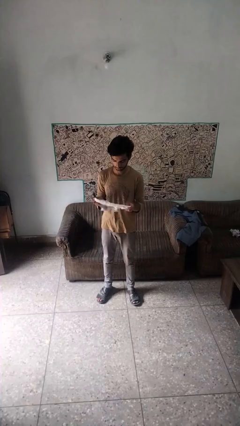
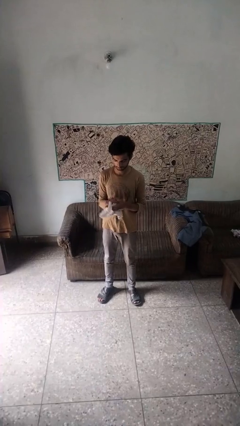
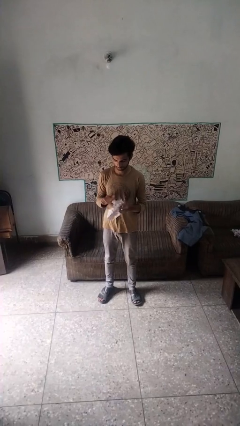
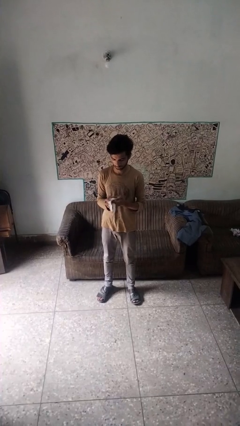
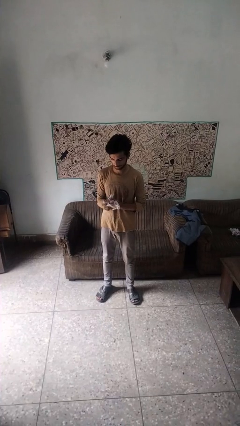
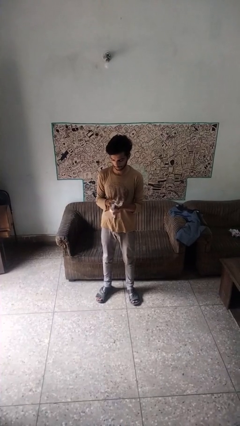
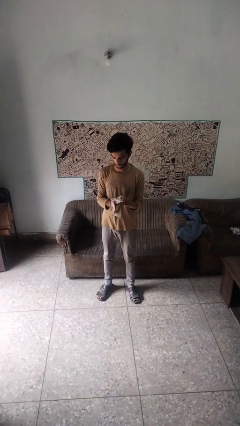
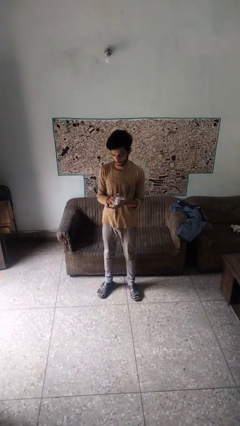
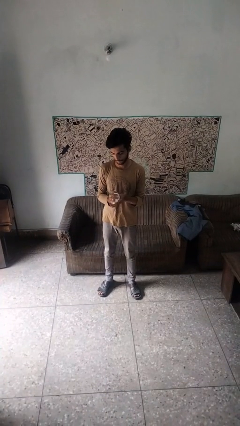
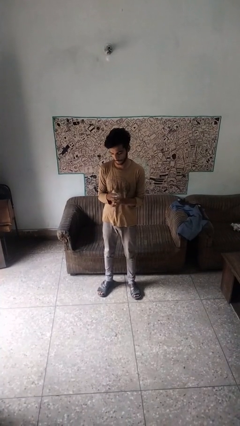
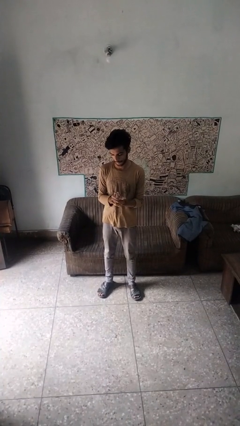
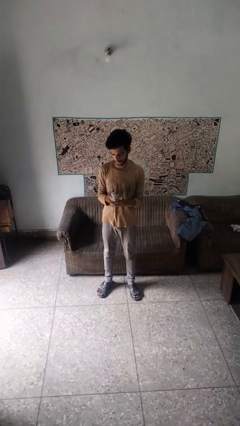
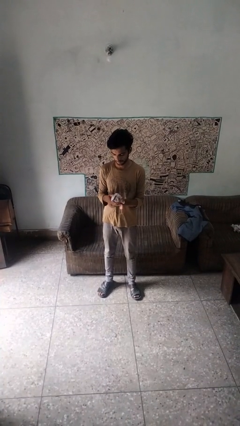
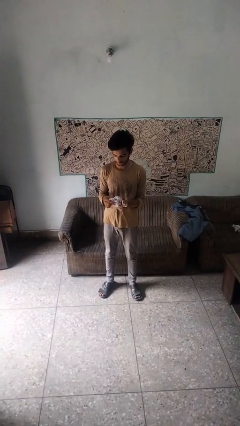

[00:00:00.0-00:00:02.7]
person crumples paper

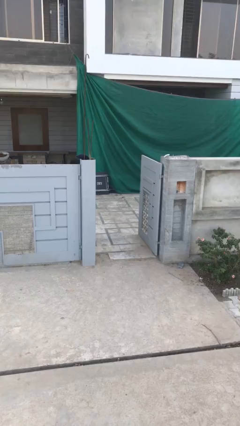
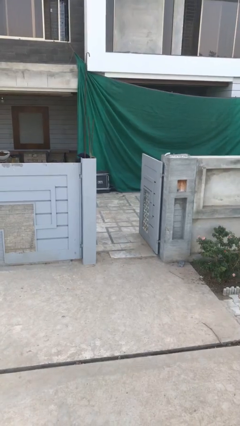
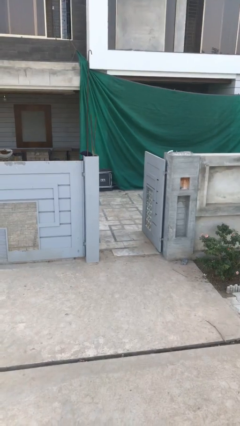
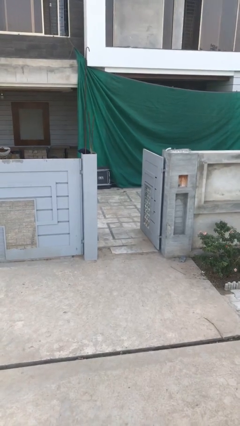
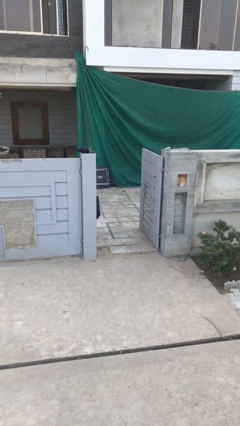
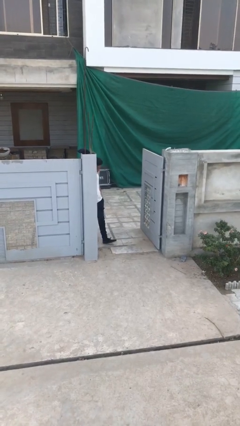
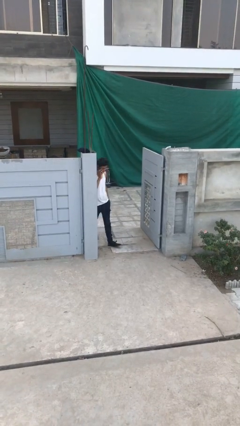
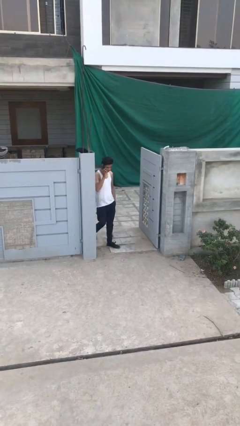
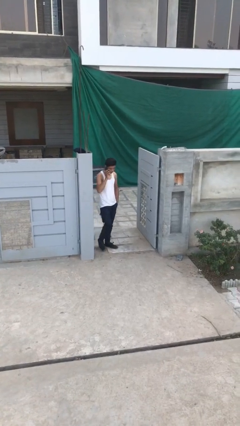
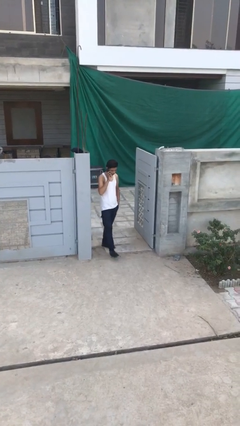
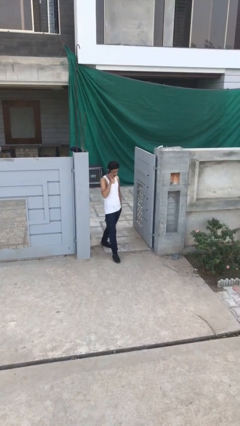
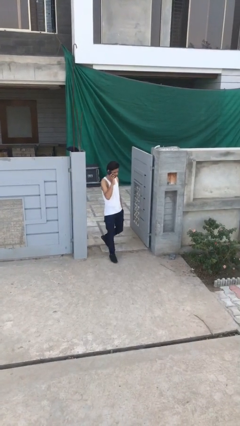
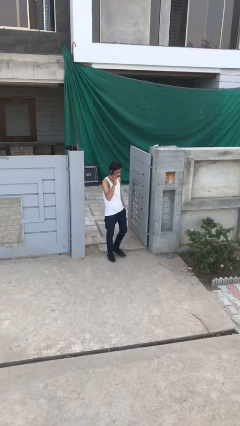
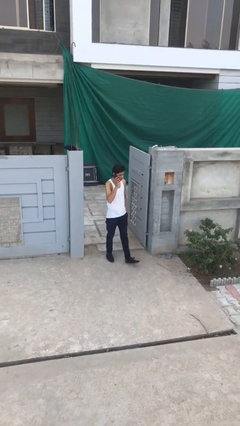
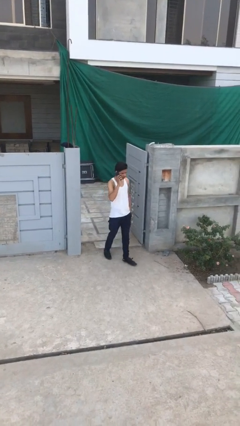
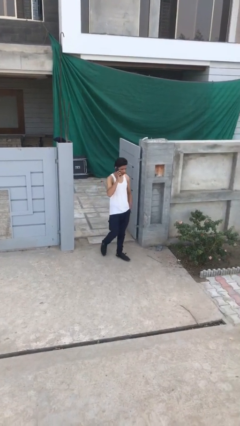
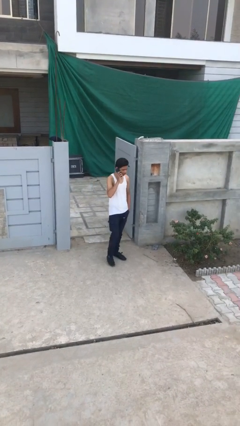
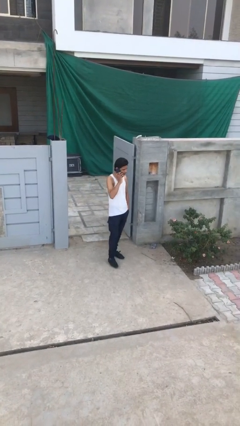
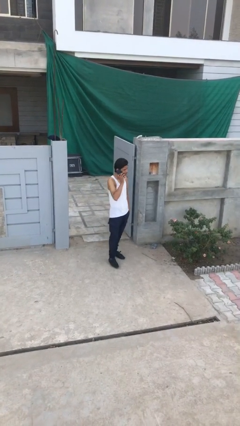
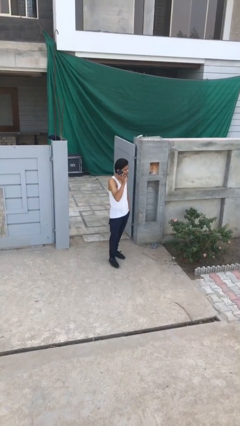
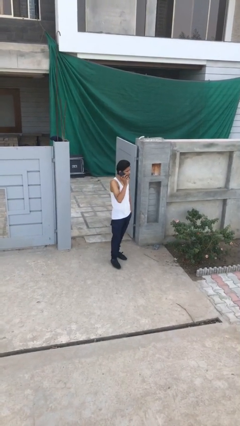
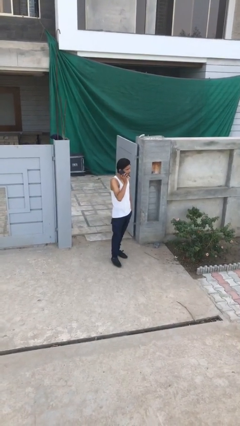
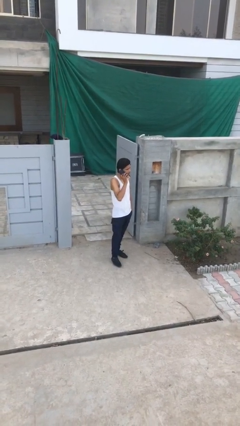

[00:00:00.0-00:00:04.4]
person enters scene through structure

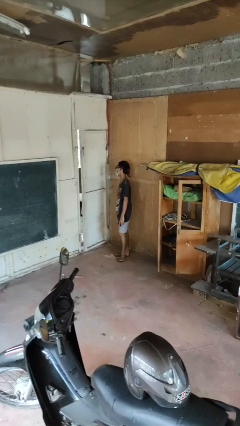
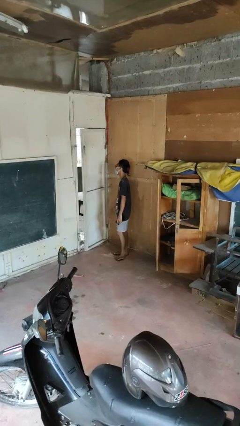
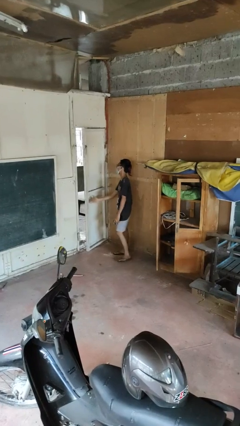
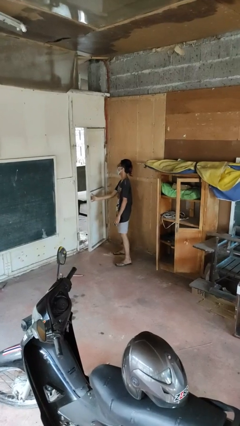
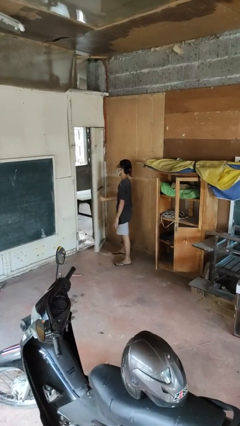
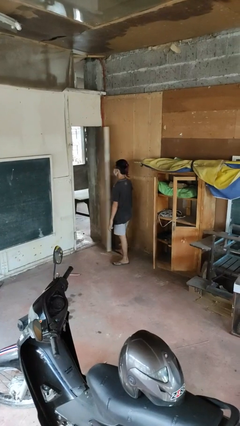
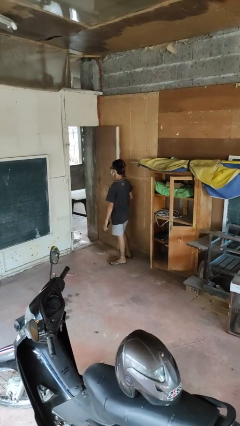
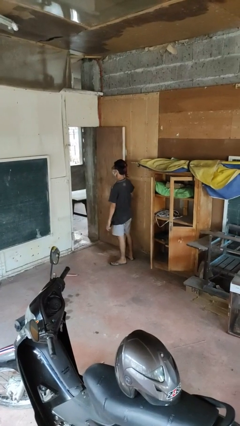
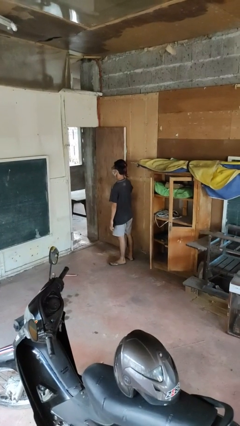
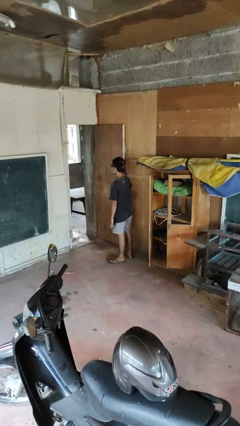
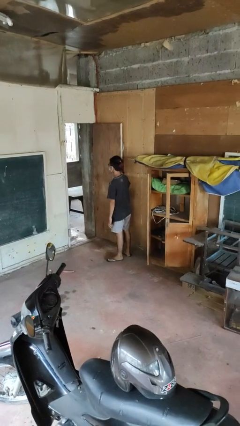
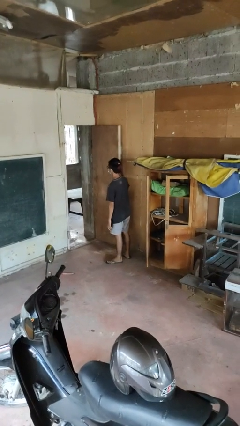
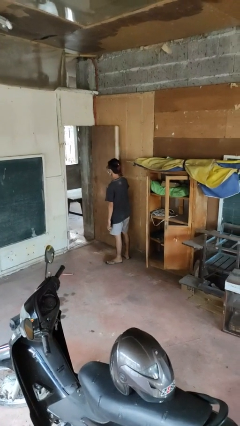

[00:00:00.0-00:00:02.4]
person opens facility door

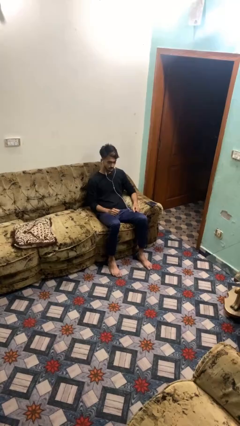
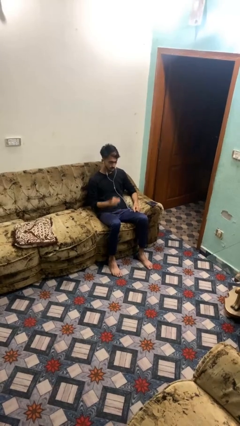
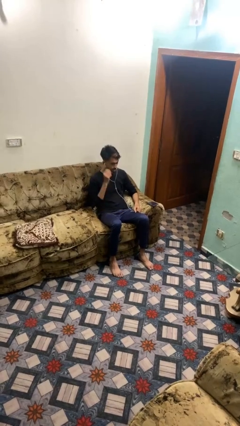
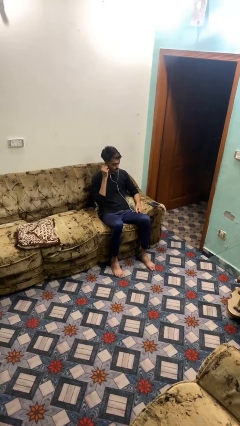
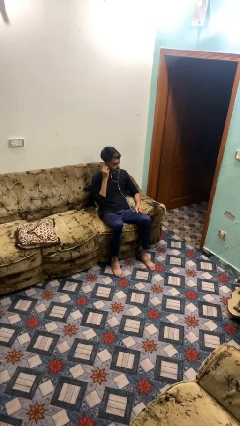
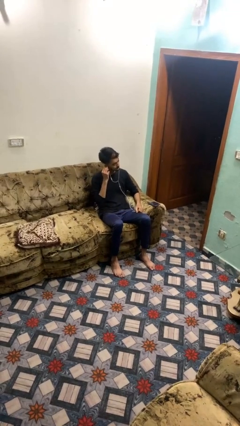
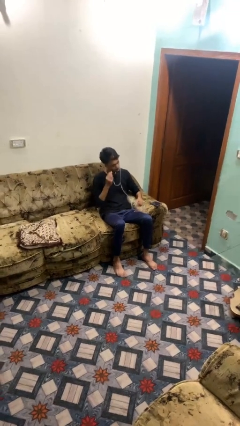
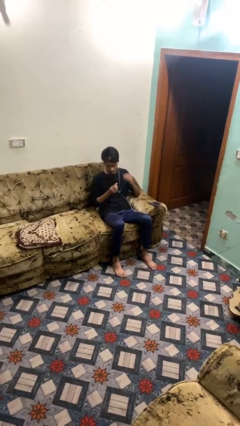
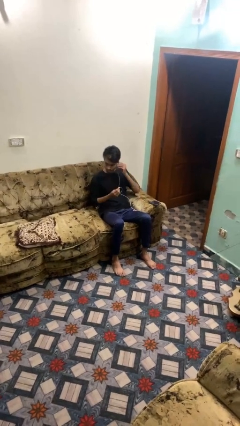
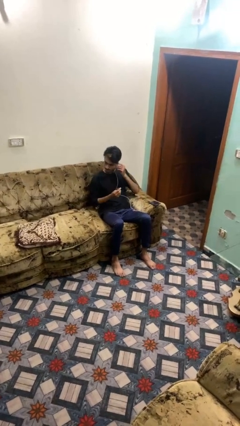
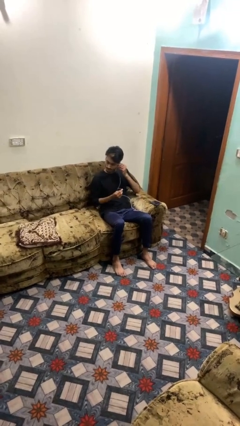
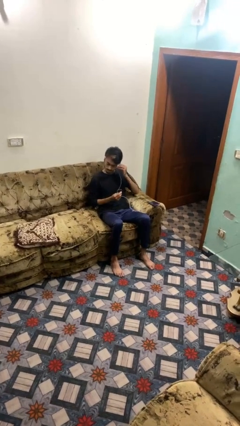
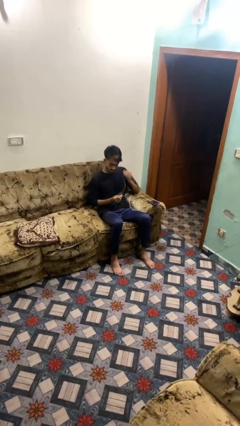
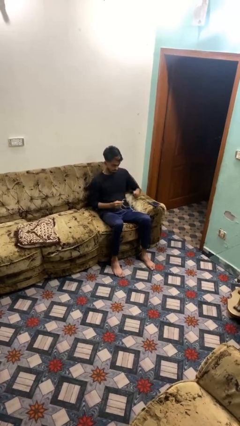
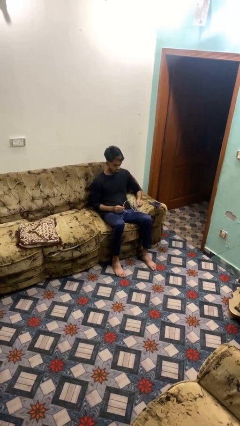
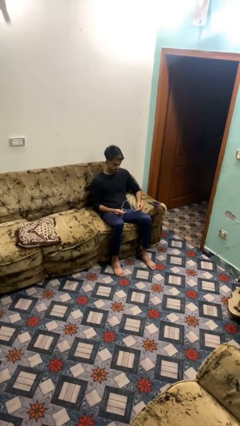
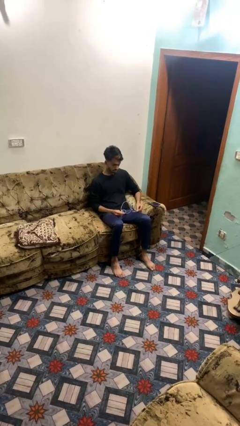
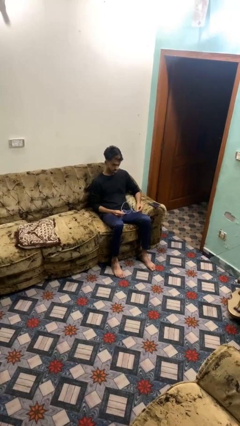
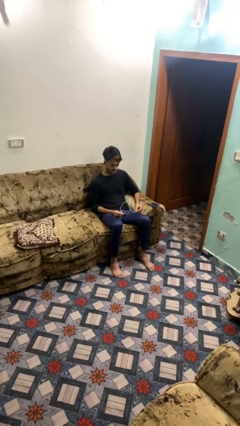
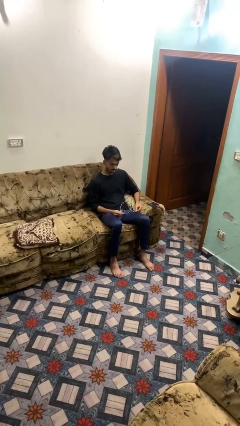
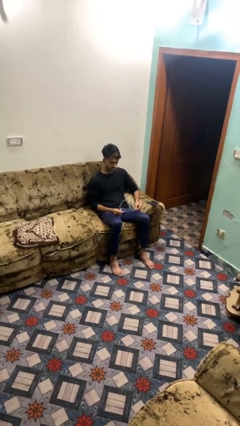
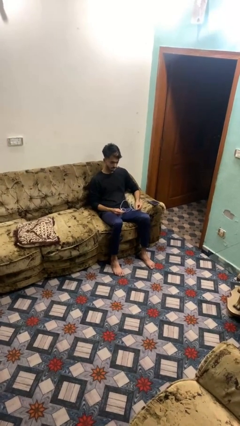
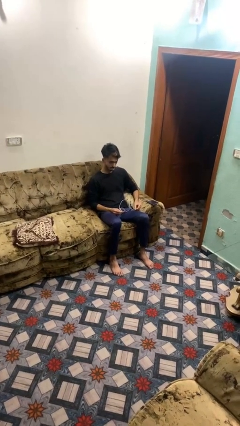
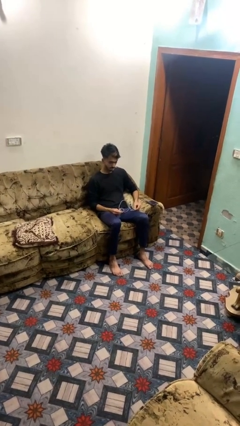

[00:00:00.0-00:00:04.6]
person takes off headphones

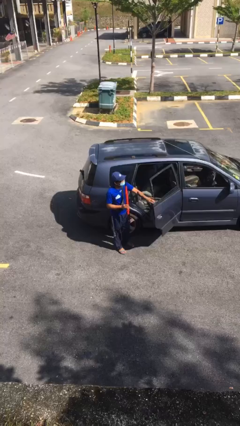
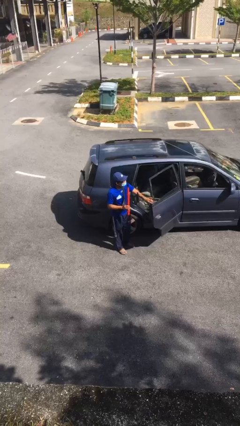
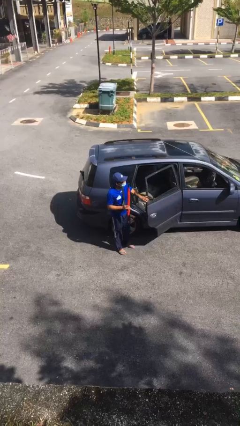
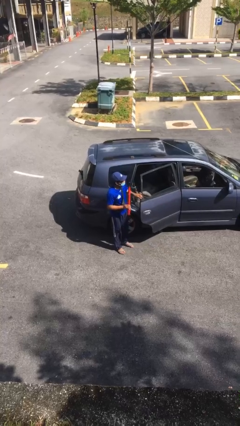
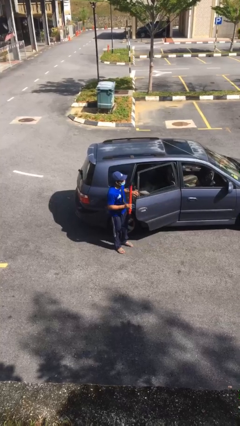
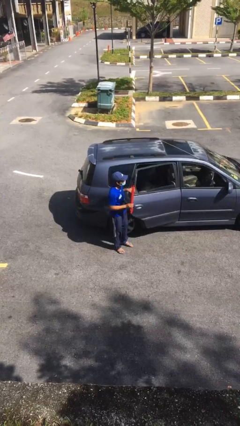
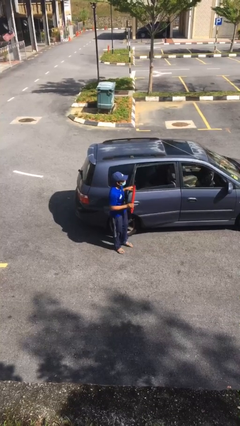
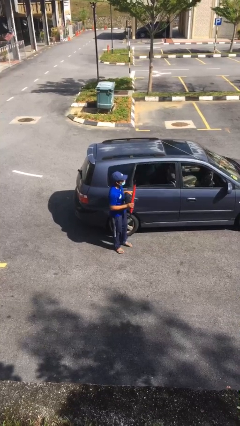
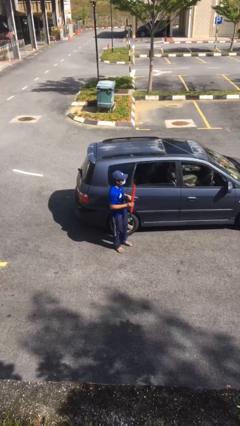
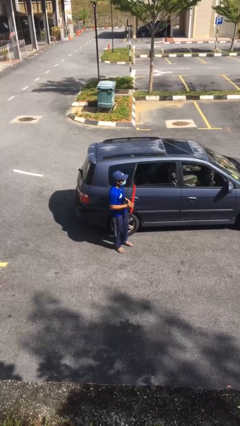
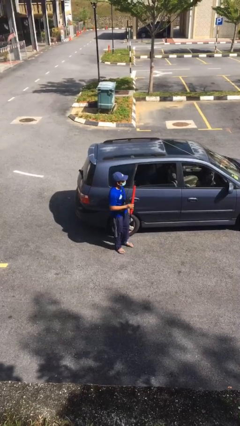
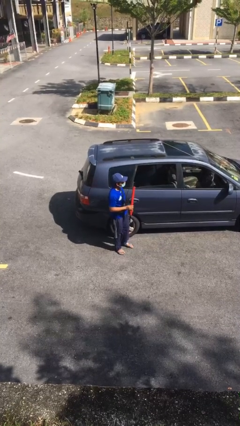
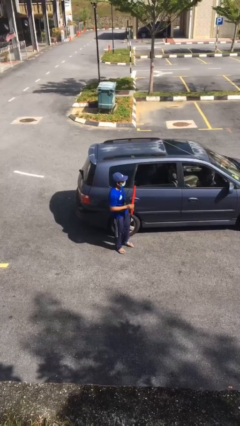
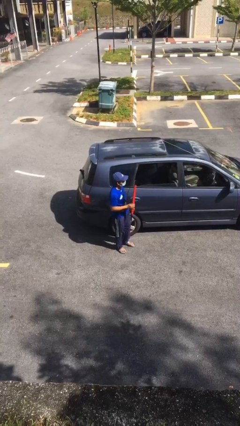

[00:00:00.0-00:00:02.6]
person closes car door

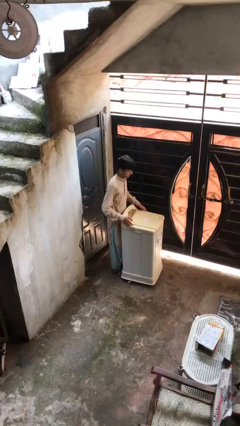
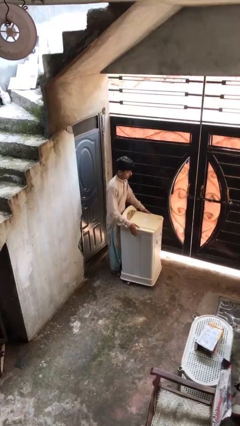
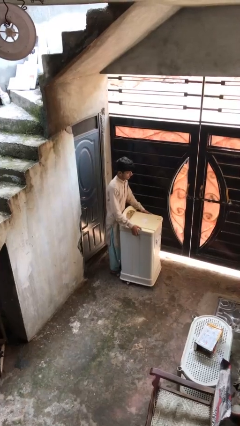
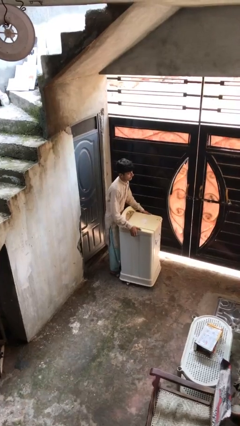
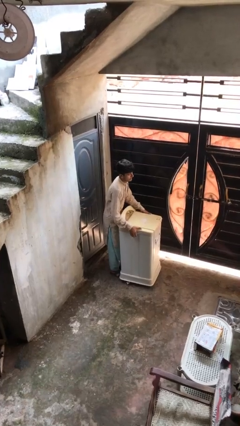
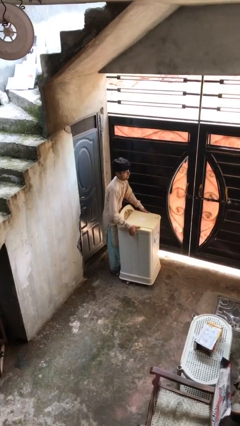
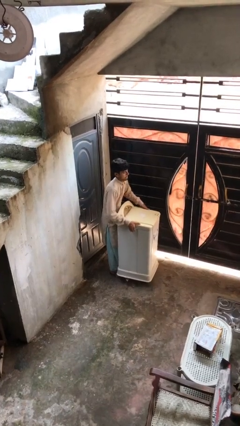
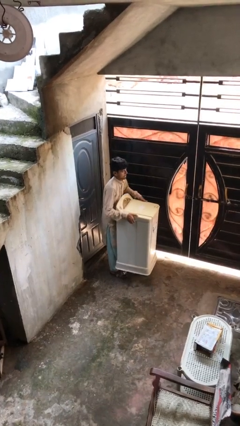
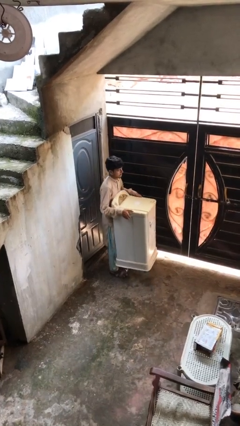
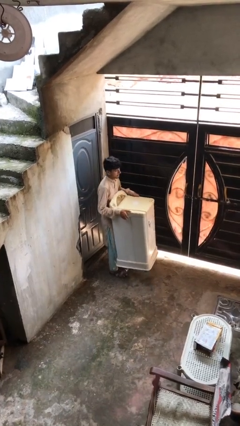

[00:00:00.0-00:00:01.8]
person picks up object from floor
